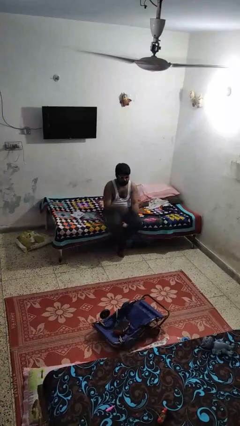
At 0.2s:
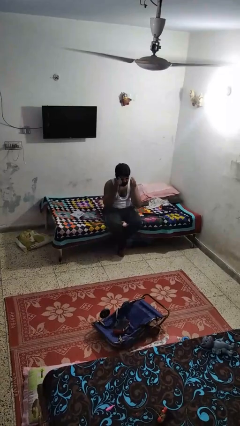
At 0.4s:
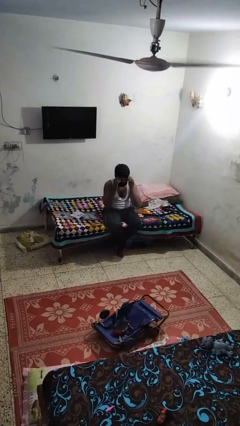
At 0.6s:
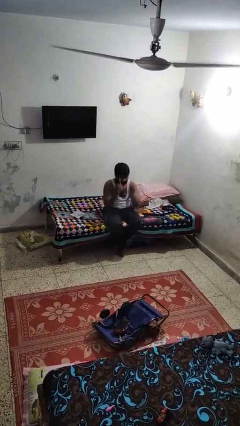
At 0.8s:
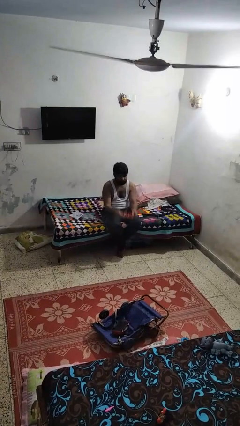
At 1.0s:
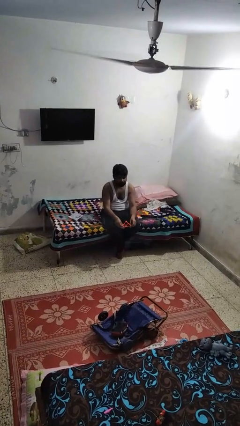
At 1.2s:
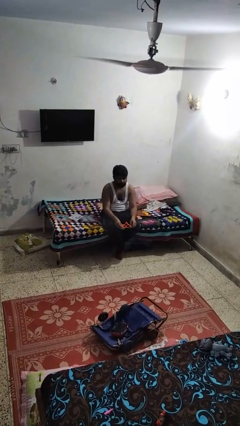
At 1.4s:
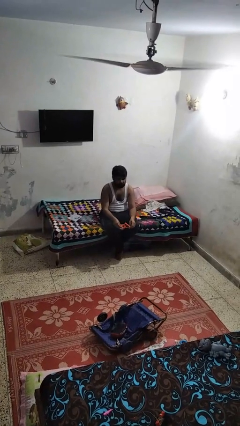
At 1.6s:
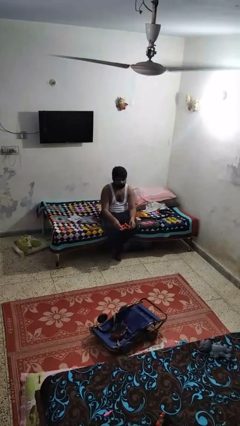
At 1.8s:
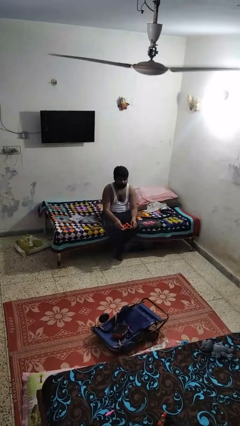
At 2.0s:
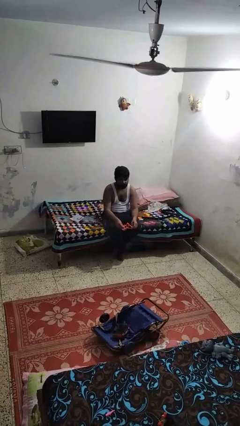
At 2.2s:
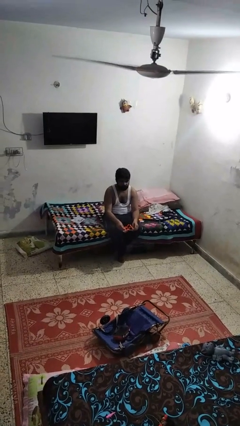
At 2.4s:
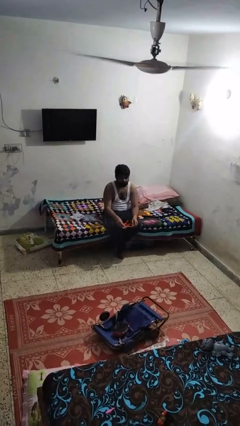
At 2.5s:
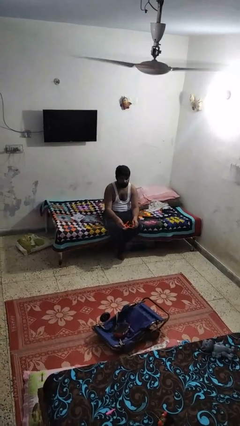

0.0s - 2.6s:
person takes off sunglasses

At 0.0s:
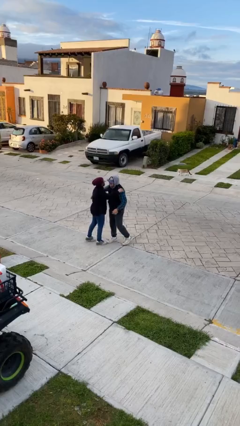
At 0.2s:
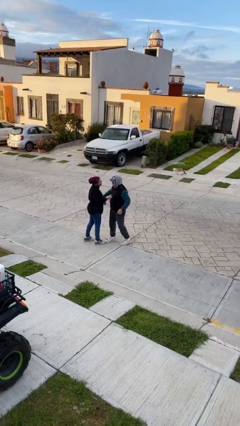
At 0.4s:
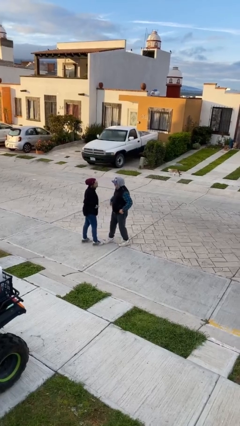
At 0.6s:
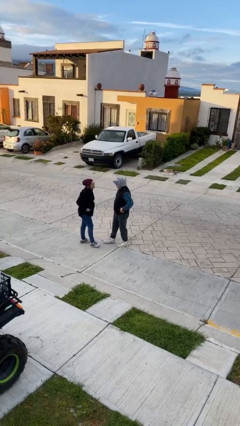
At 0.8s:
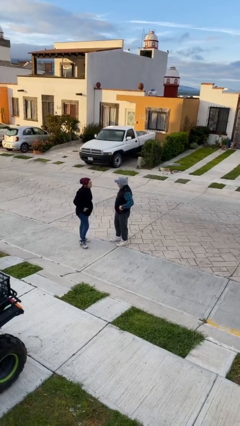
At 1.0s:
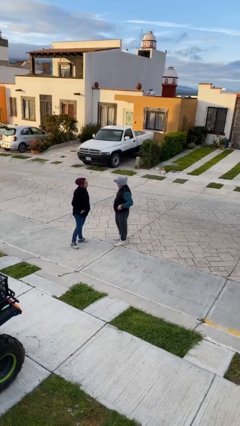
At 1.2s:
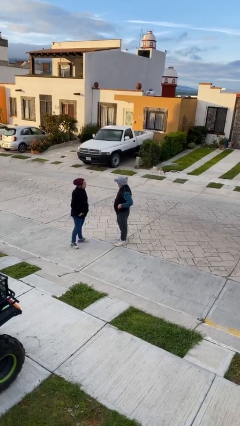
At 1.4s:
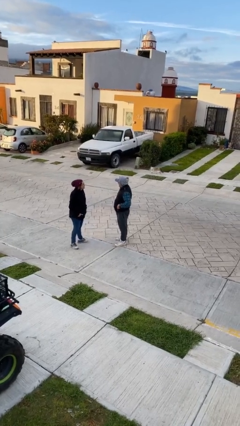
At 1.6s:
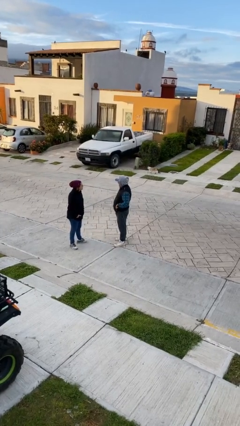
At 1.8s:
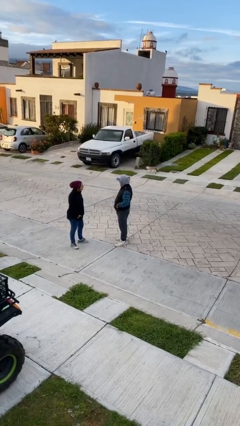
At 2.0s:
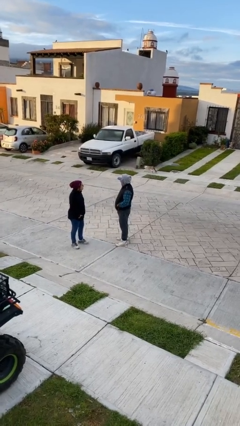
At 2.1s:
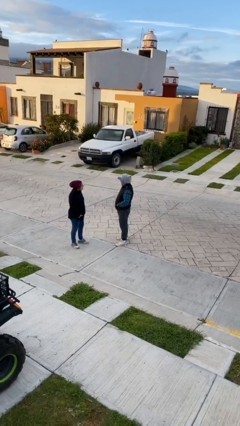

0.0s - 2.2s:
person talks to person

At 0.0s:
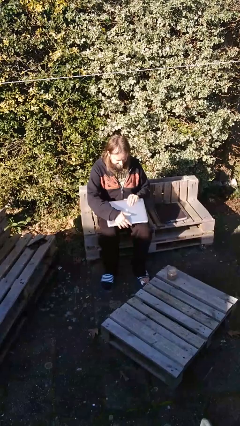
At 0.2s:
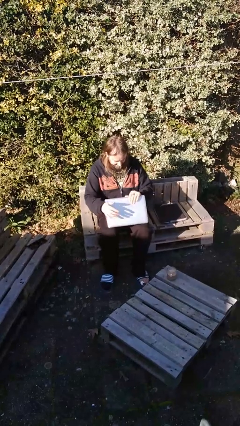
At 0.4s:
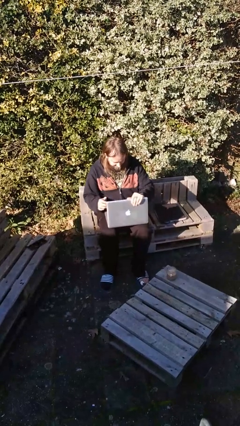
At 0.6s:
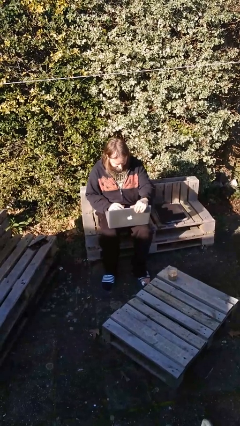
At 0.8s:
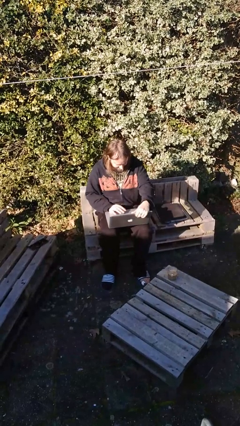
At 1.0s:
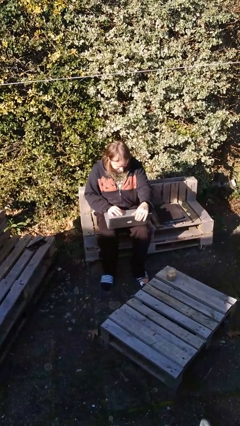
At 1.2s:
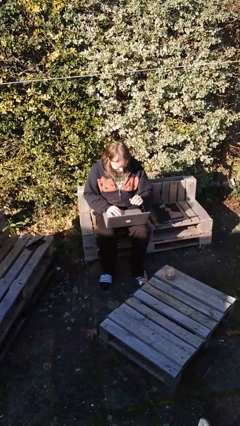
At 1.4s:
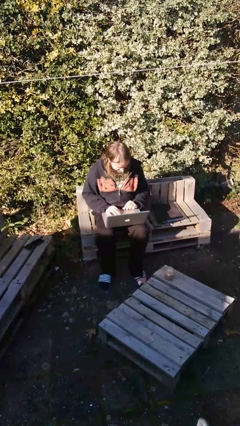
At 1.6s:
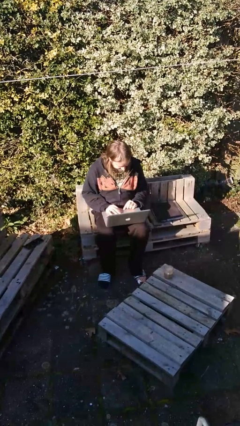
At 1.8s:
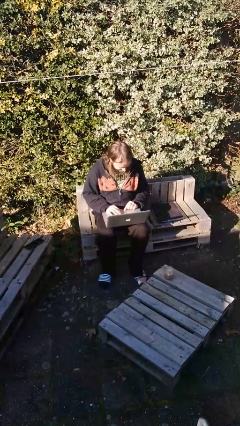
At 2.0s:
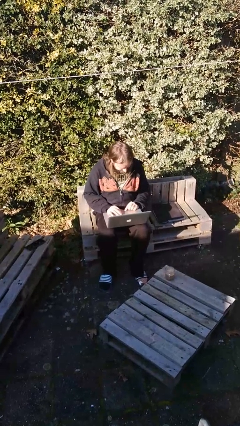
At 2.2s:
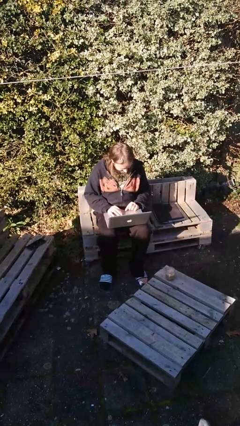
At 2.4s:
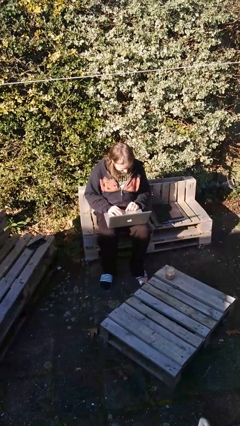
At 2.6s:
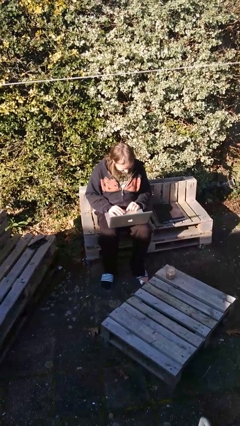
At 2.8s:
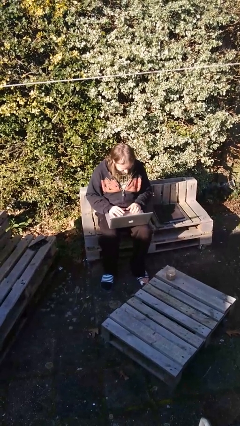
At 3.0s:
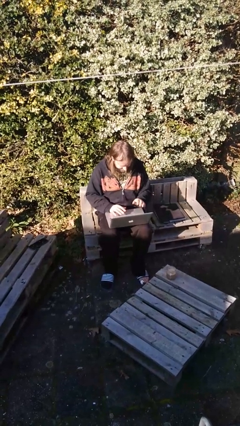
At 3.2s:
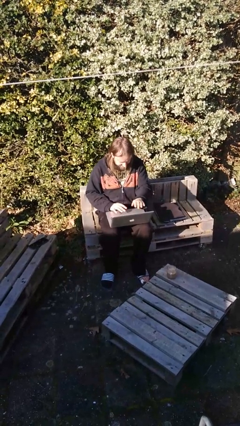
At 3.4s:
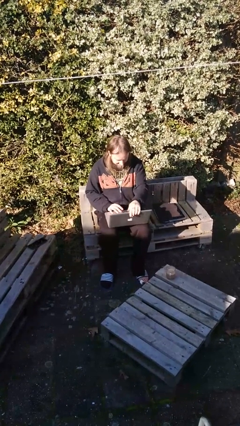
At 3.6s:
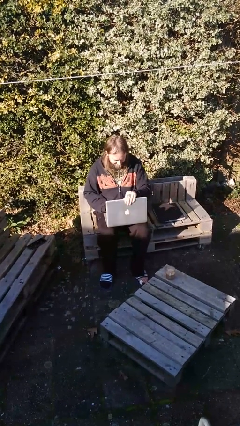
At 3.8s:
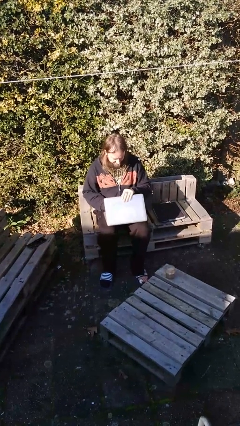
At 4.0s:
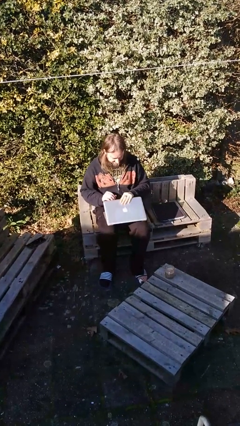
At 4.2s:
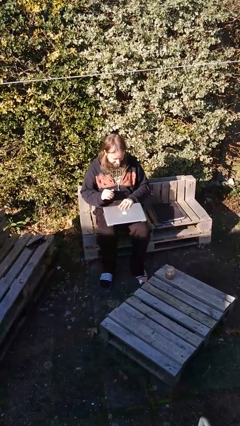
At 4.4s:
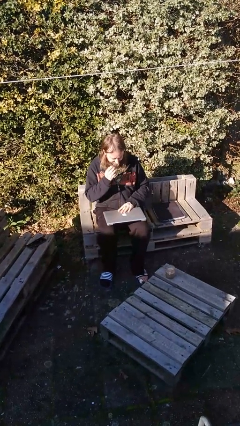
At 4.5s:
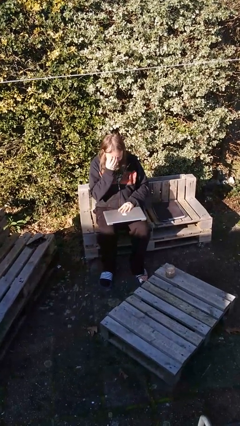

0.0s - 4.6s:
person interacts with laptop

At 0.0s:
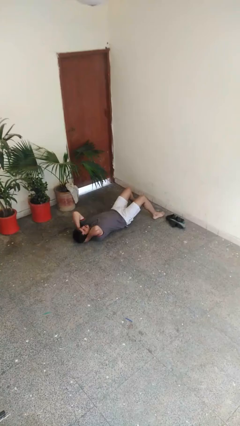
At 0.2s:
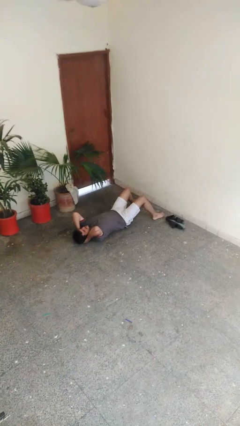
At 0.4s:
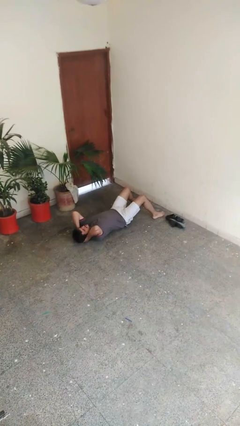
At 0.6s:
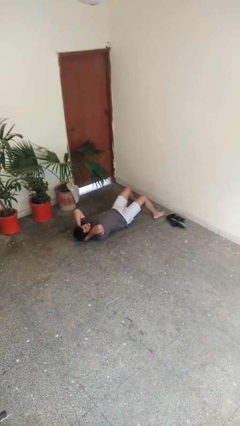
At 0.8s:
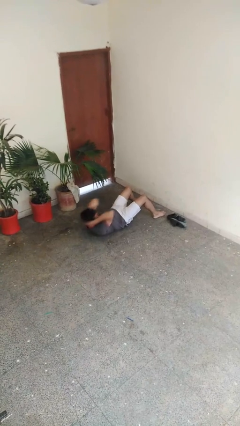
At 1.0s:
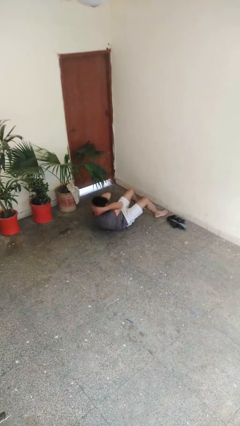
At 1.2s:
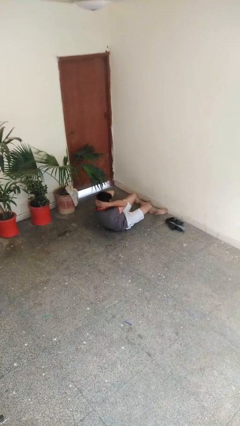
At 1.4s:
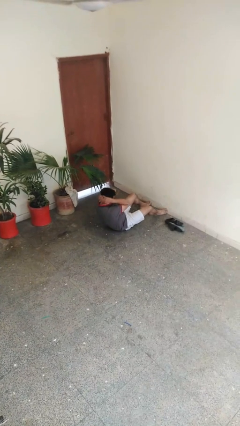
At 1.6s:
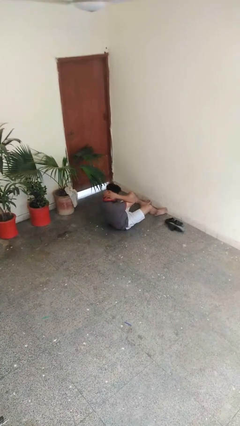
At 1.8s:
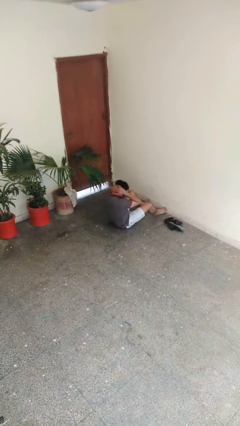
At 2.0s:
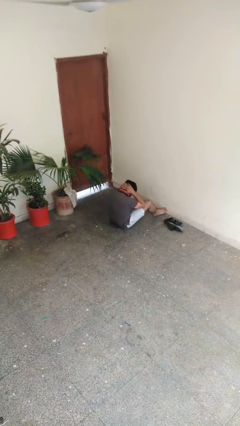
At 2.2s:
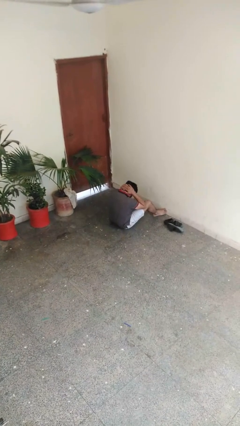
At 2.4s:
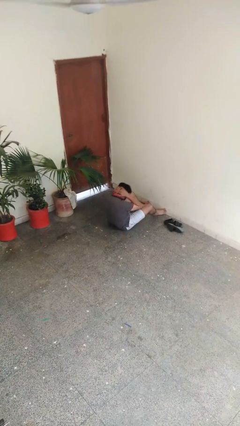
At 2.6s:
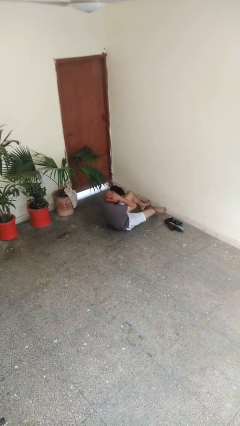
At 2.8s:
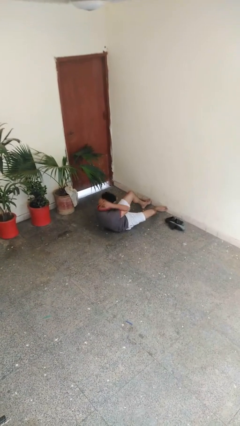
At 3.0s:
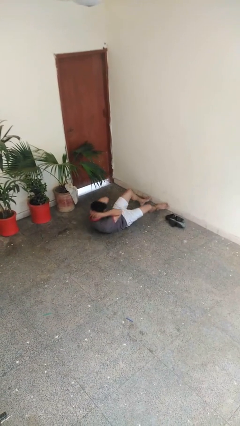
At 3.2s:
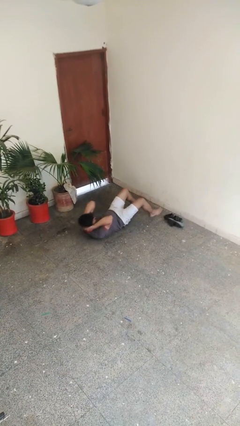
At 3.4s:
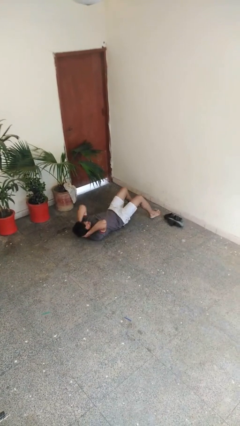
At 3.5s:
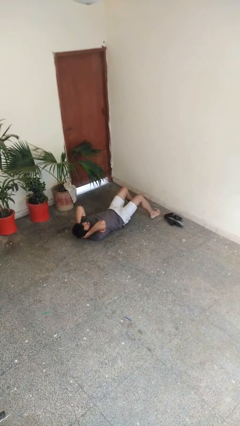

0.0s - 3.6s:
person exercises with situp

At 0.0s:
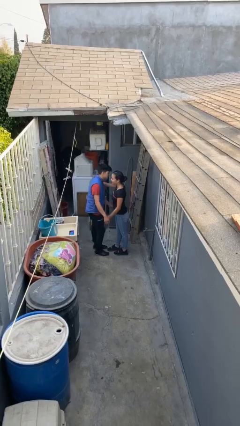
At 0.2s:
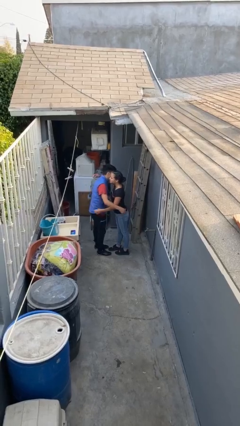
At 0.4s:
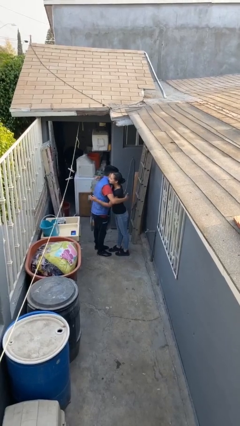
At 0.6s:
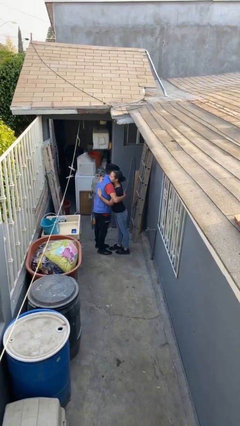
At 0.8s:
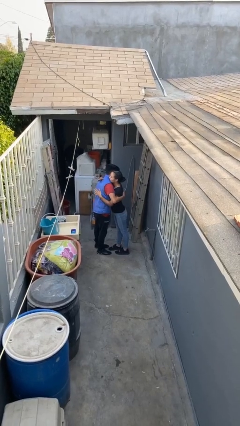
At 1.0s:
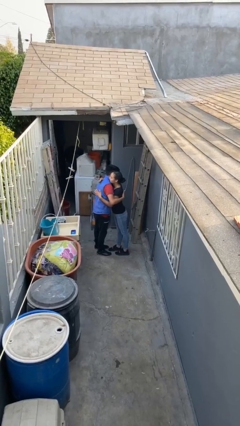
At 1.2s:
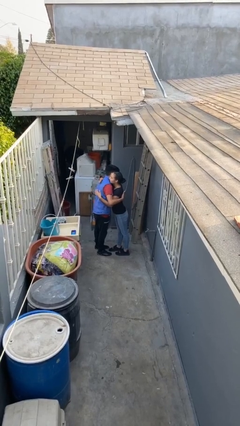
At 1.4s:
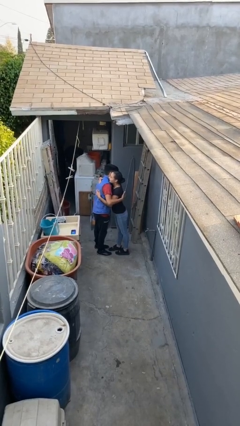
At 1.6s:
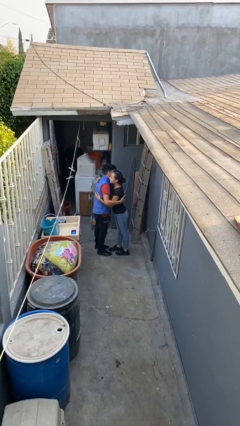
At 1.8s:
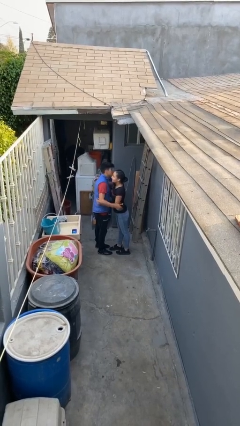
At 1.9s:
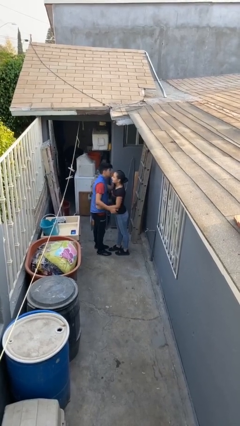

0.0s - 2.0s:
person embraces person

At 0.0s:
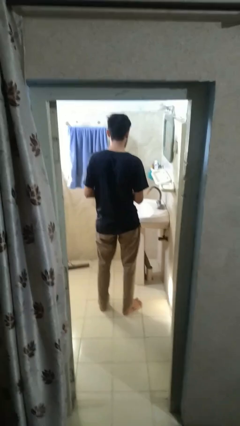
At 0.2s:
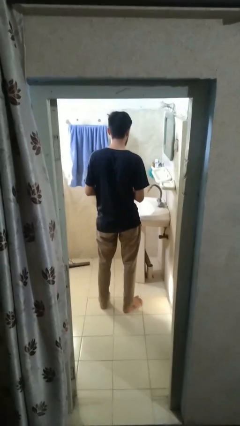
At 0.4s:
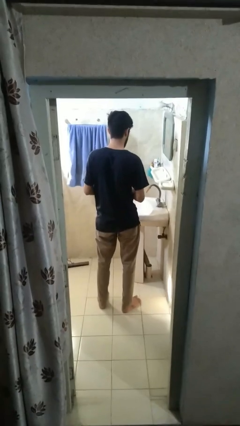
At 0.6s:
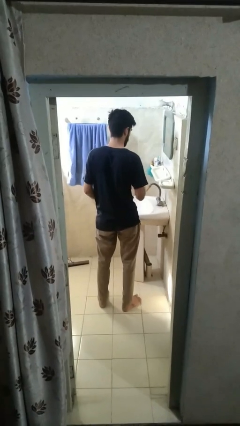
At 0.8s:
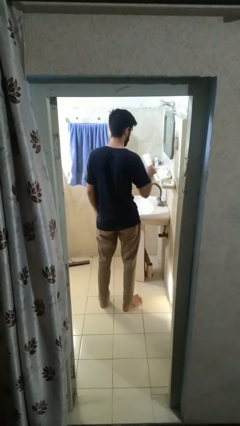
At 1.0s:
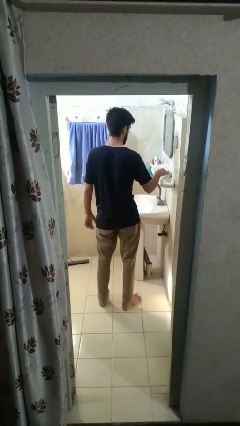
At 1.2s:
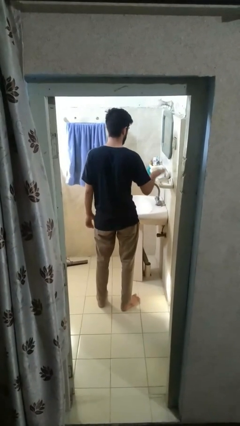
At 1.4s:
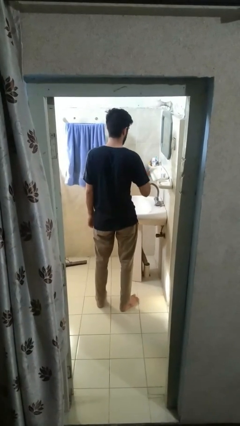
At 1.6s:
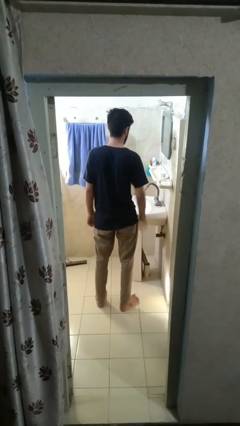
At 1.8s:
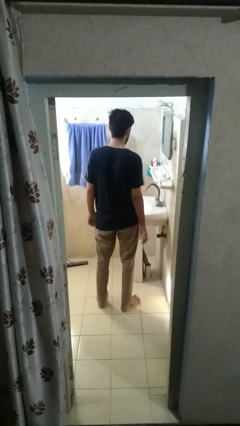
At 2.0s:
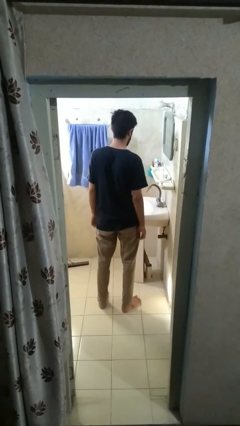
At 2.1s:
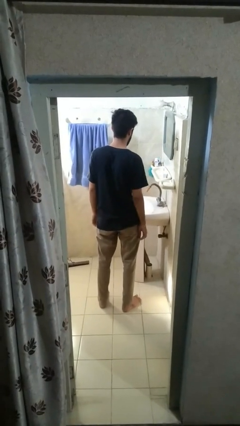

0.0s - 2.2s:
person puts down object on countertop
